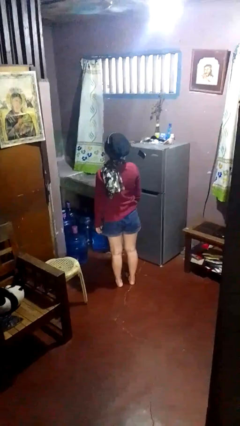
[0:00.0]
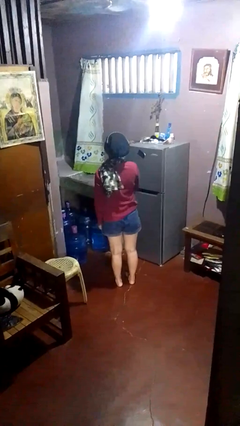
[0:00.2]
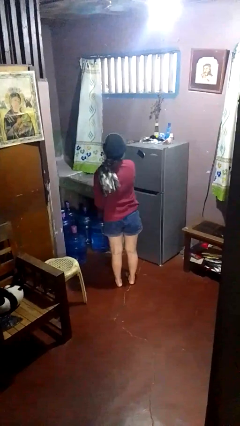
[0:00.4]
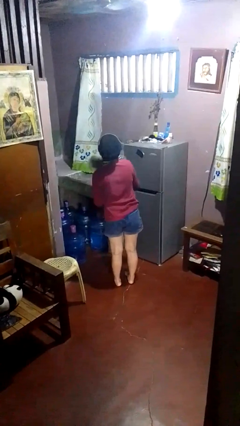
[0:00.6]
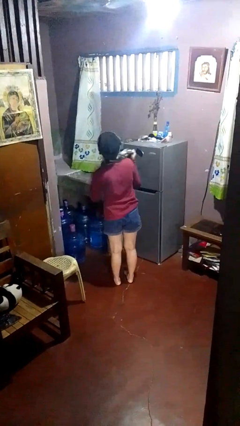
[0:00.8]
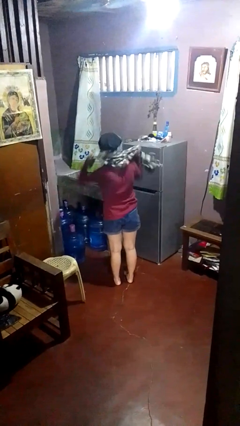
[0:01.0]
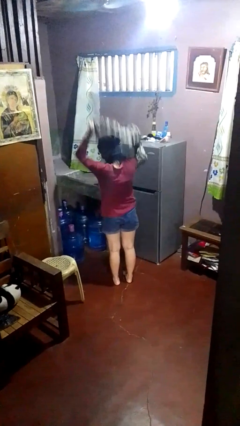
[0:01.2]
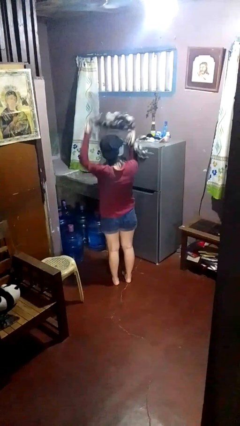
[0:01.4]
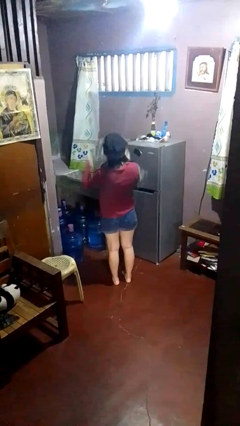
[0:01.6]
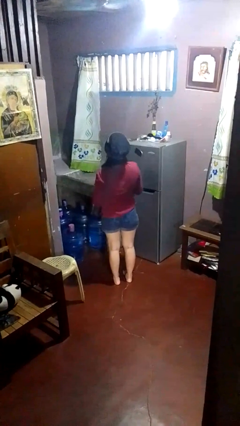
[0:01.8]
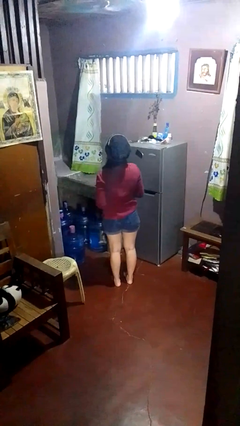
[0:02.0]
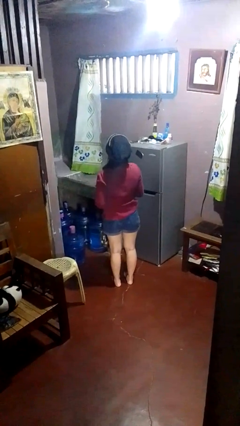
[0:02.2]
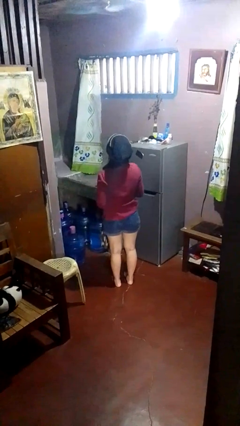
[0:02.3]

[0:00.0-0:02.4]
person takes off scarf

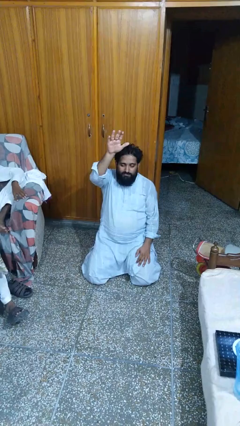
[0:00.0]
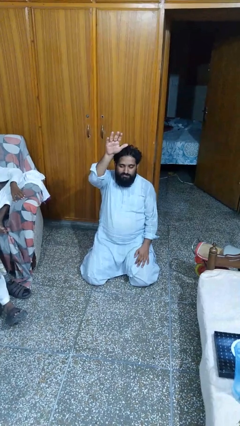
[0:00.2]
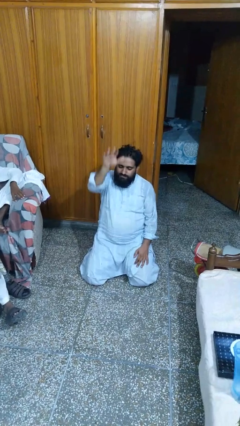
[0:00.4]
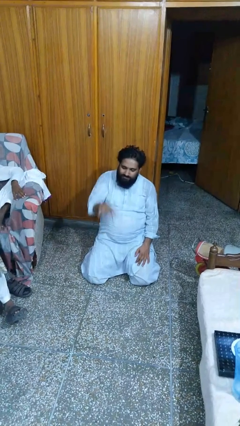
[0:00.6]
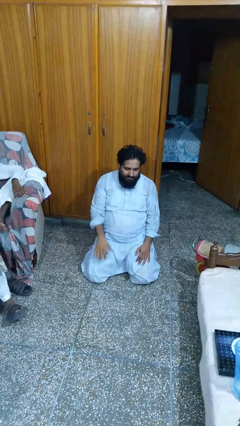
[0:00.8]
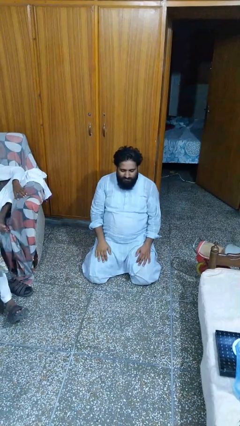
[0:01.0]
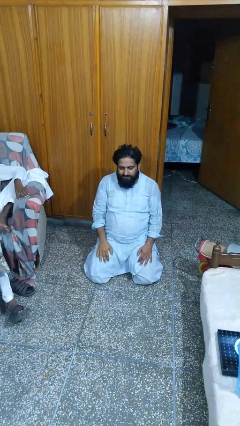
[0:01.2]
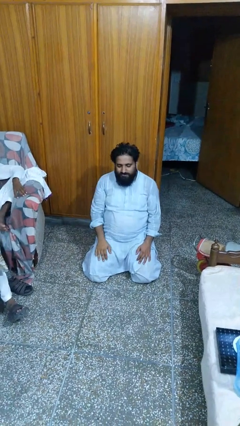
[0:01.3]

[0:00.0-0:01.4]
person gestures lower hand

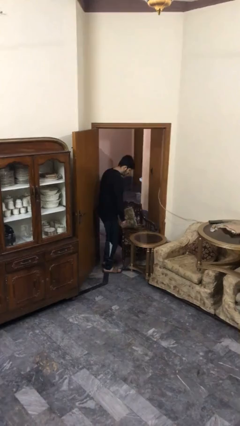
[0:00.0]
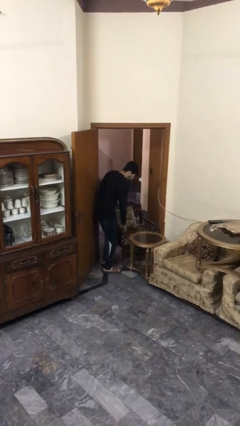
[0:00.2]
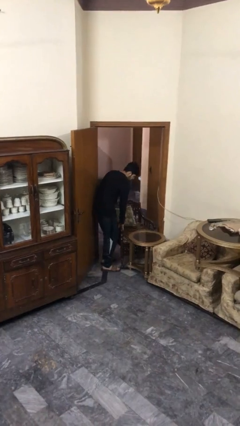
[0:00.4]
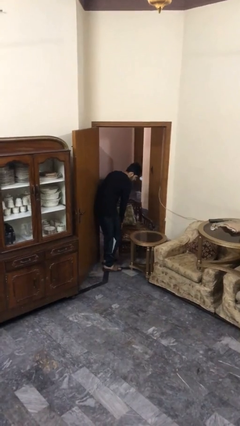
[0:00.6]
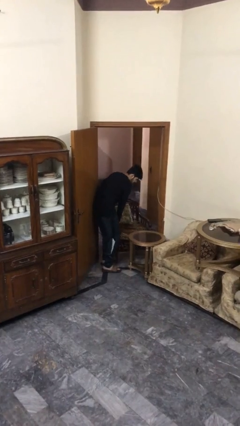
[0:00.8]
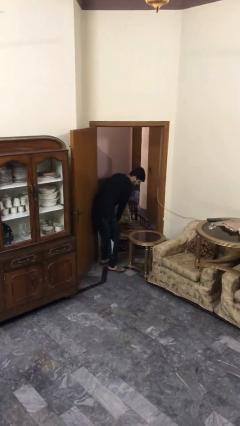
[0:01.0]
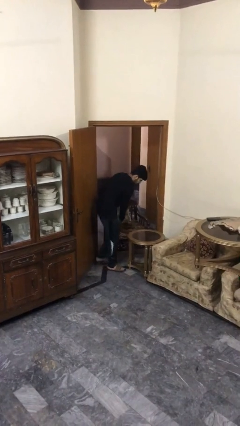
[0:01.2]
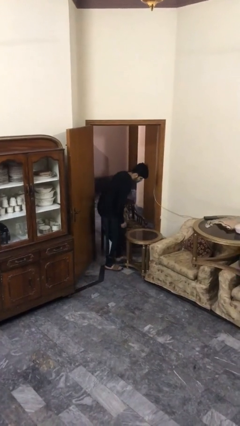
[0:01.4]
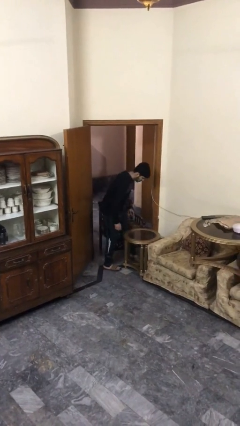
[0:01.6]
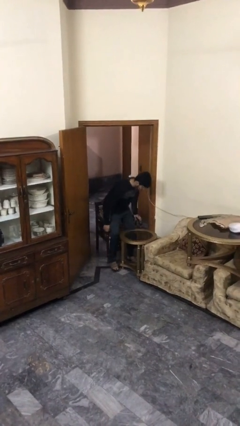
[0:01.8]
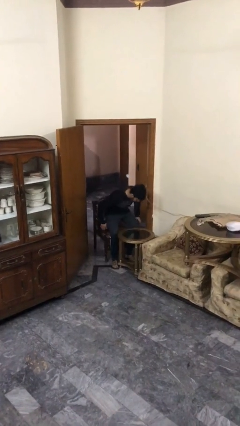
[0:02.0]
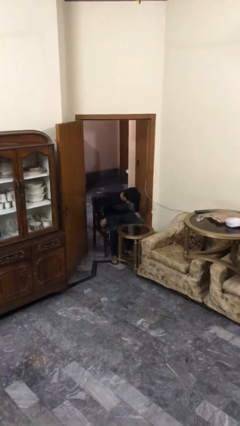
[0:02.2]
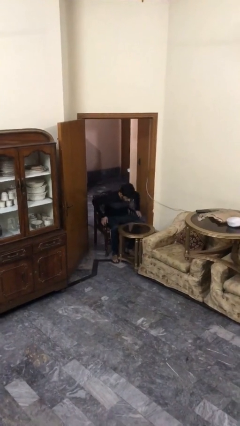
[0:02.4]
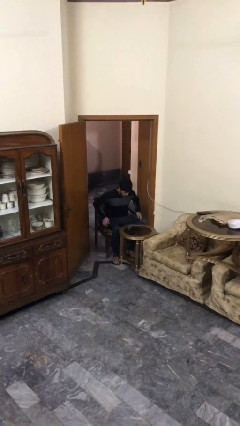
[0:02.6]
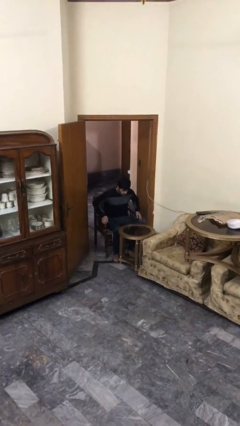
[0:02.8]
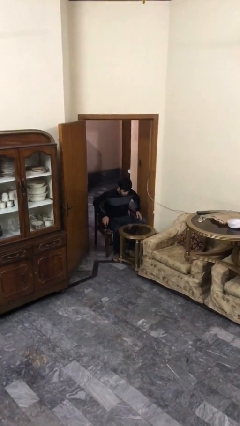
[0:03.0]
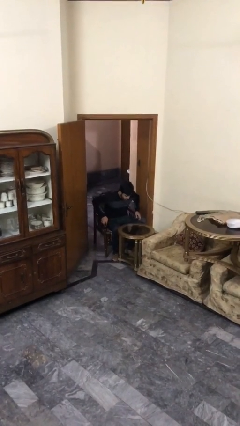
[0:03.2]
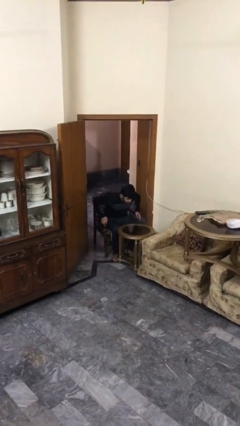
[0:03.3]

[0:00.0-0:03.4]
person sits down

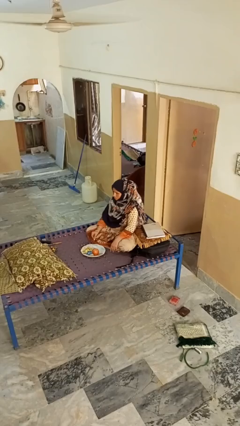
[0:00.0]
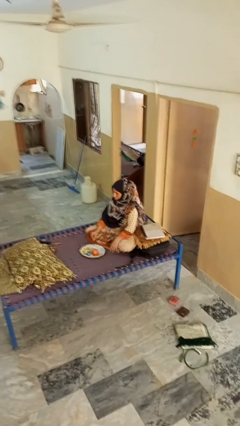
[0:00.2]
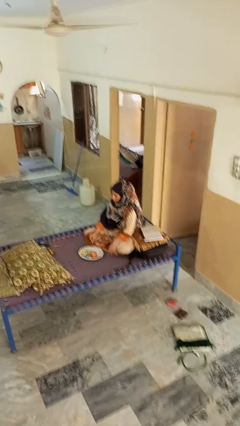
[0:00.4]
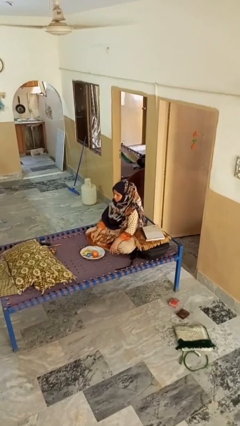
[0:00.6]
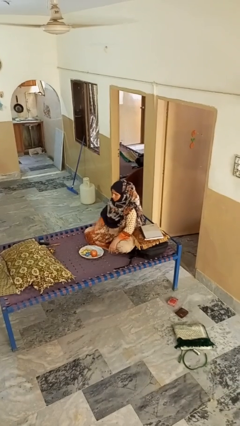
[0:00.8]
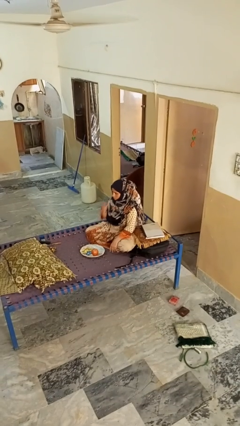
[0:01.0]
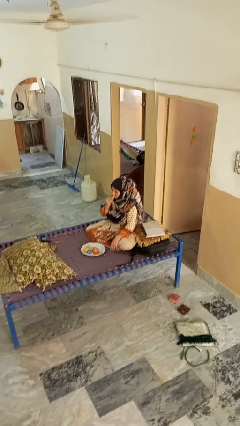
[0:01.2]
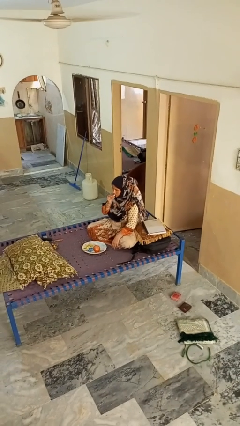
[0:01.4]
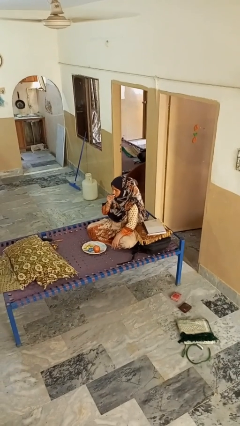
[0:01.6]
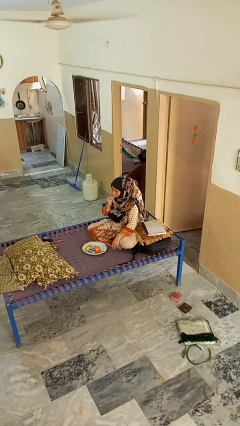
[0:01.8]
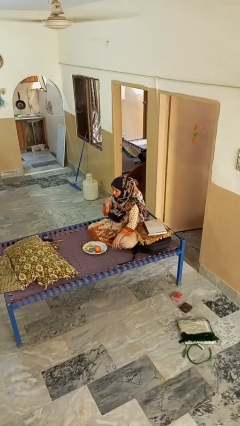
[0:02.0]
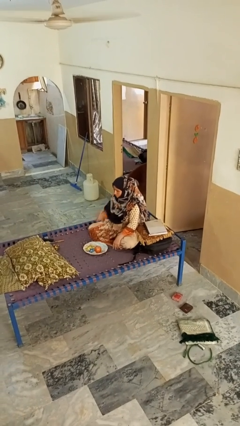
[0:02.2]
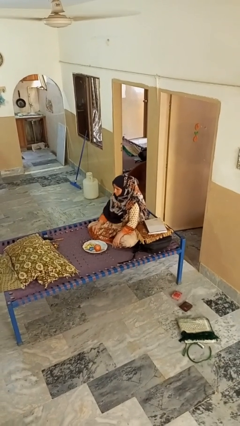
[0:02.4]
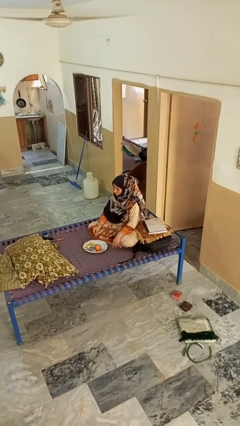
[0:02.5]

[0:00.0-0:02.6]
person eats apple

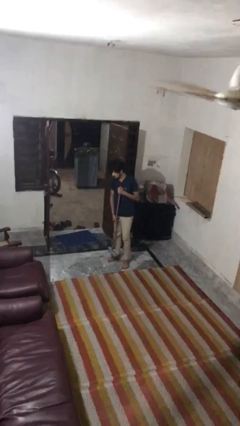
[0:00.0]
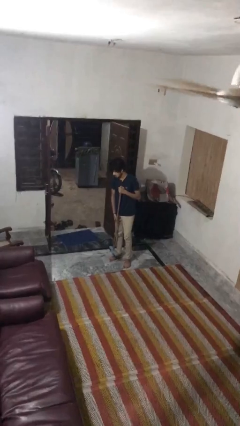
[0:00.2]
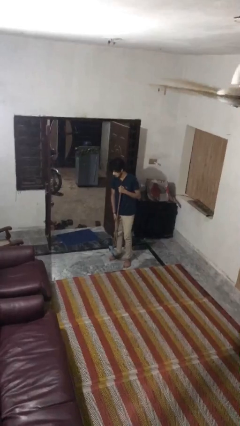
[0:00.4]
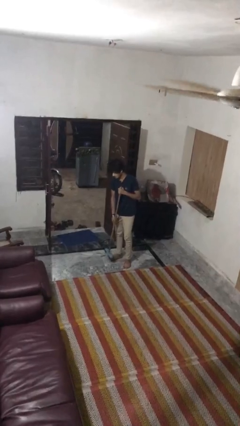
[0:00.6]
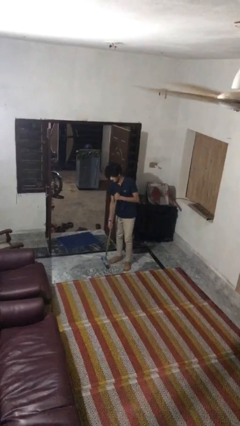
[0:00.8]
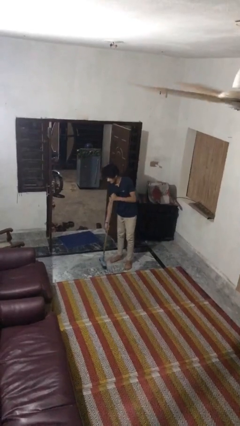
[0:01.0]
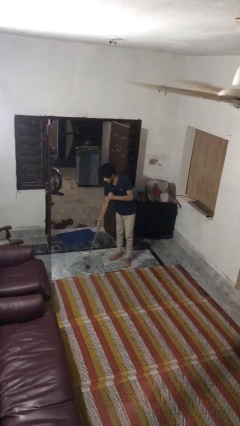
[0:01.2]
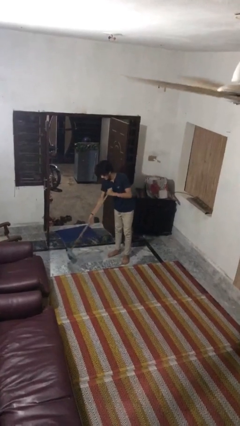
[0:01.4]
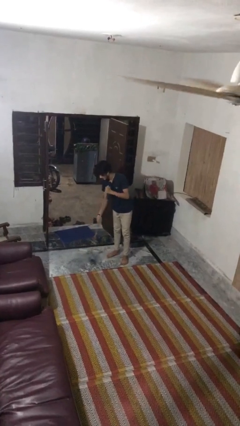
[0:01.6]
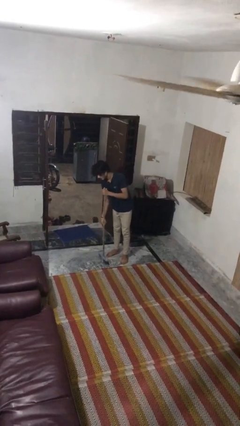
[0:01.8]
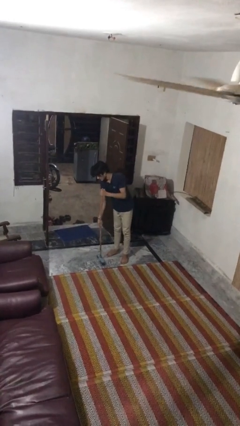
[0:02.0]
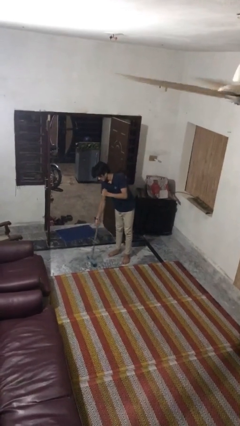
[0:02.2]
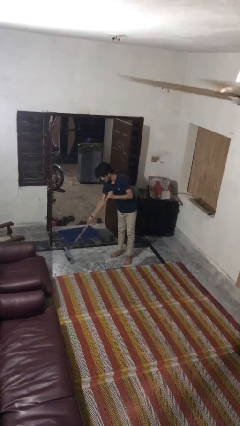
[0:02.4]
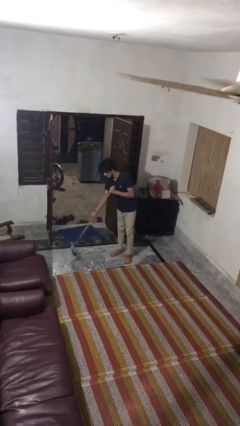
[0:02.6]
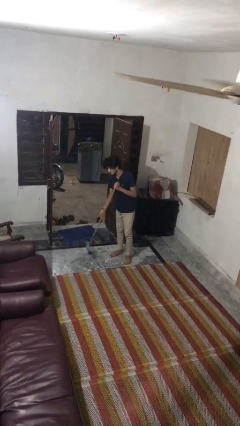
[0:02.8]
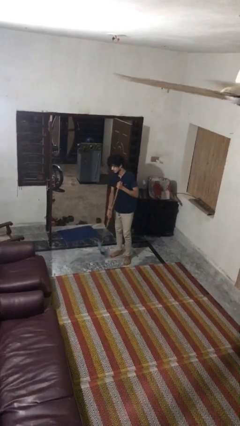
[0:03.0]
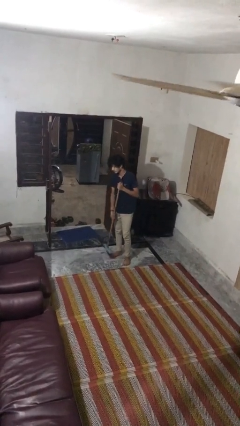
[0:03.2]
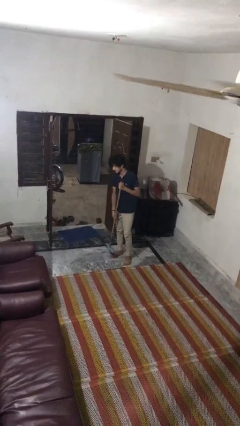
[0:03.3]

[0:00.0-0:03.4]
person sweeps floor

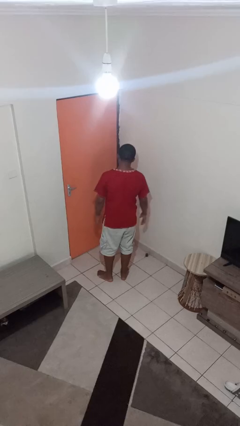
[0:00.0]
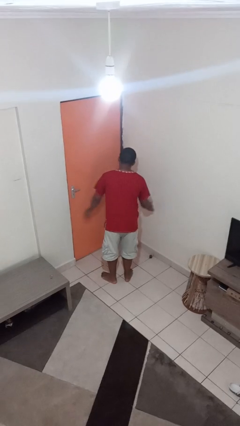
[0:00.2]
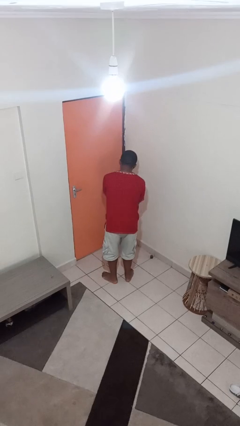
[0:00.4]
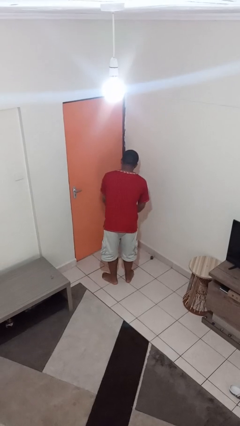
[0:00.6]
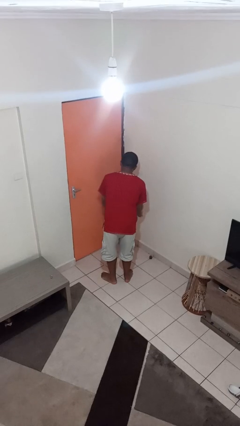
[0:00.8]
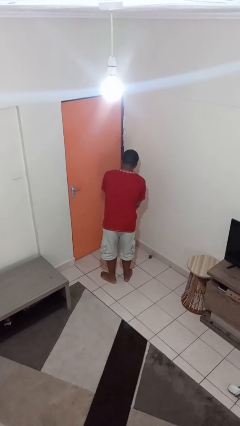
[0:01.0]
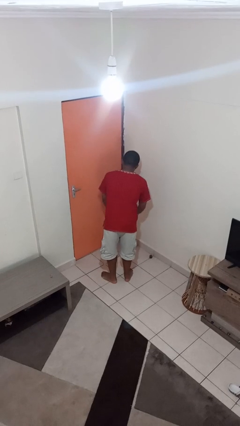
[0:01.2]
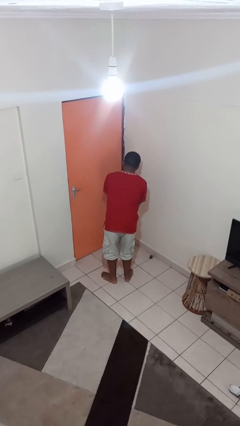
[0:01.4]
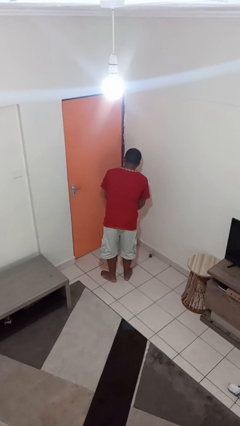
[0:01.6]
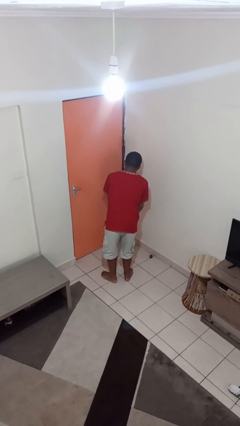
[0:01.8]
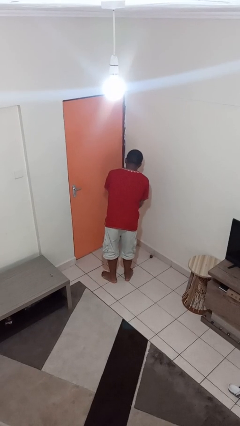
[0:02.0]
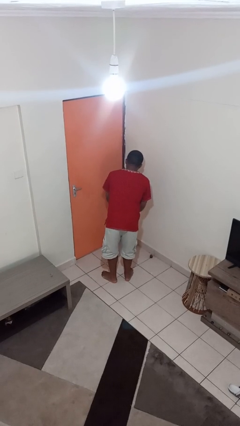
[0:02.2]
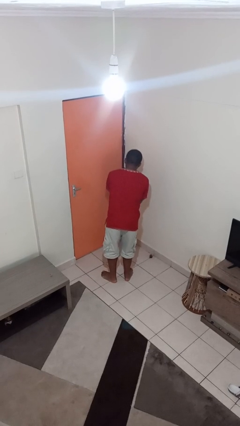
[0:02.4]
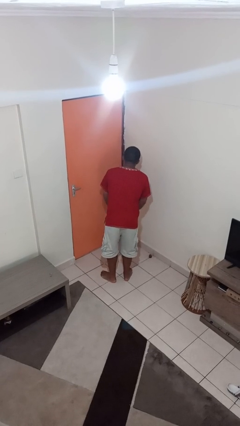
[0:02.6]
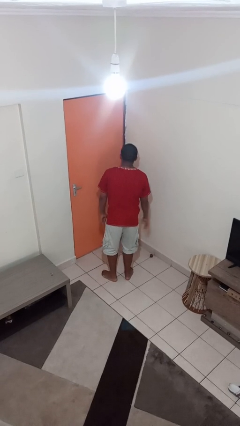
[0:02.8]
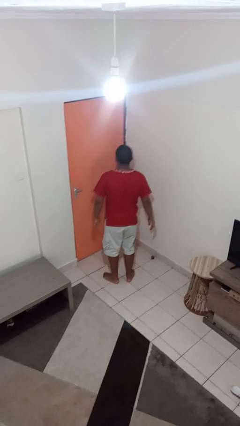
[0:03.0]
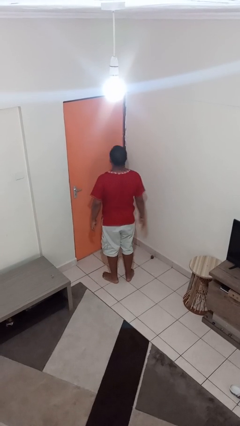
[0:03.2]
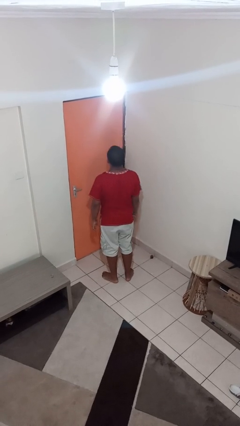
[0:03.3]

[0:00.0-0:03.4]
person claps hands

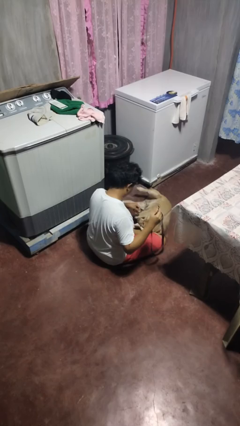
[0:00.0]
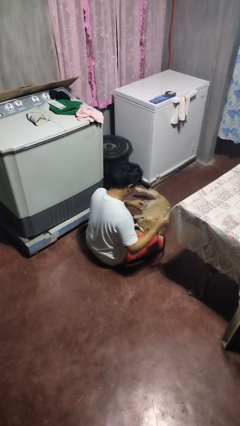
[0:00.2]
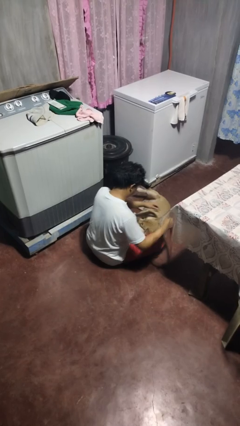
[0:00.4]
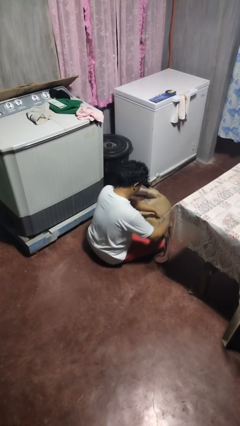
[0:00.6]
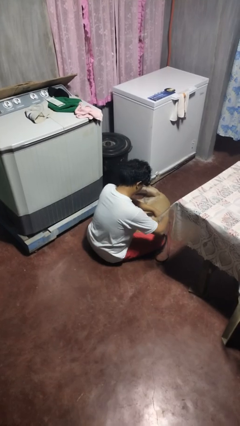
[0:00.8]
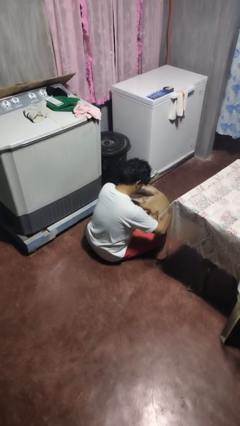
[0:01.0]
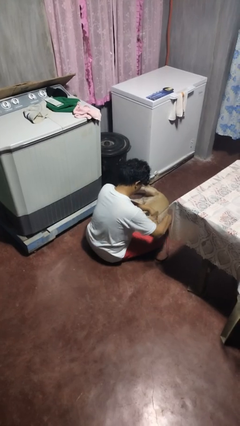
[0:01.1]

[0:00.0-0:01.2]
person attaches leash to dog
